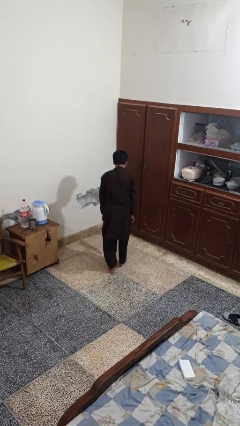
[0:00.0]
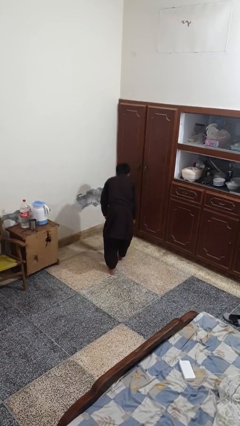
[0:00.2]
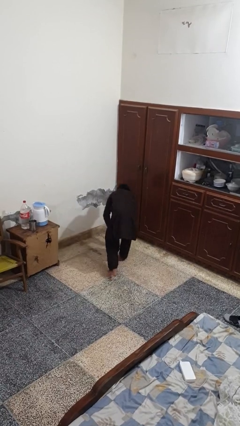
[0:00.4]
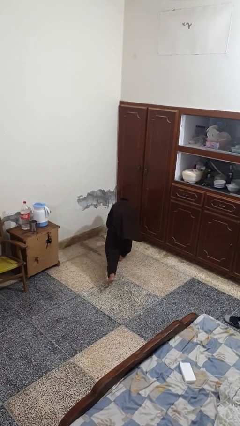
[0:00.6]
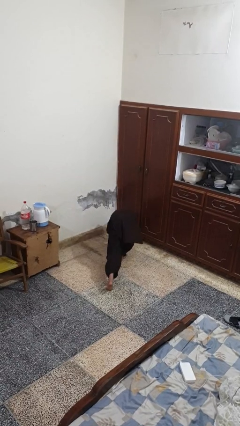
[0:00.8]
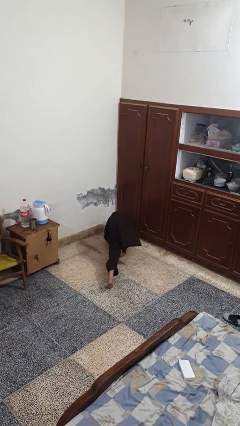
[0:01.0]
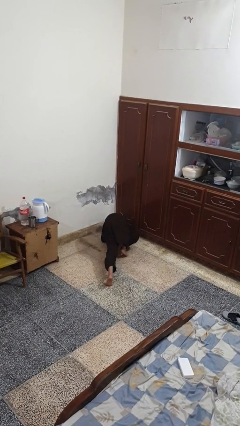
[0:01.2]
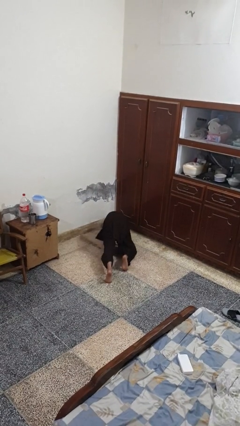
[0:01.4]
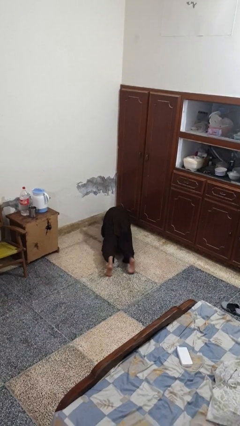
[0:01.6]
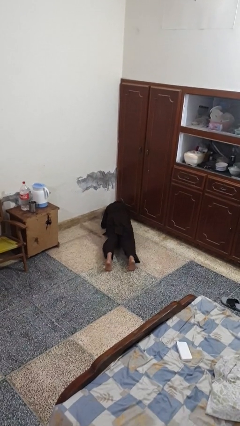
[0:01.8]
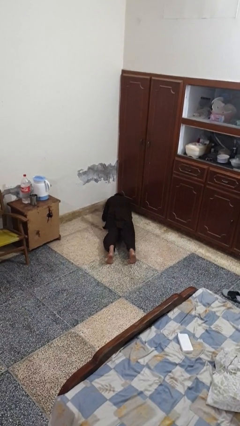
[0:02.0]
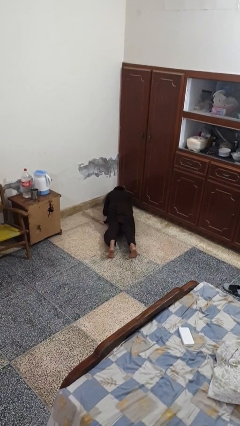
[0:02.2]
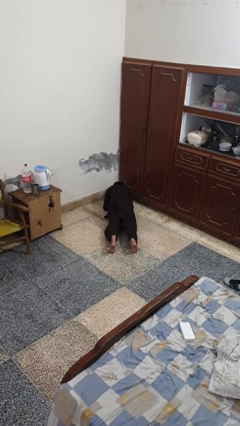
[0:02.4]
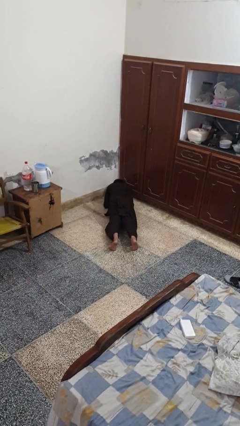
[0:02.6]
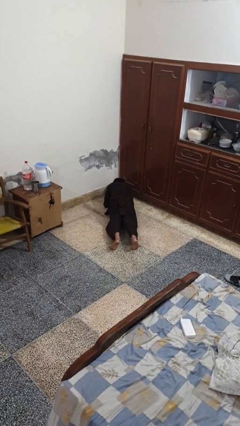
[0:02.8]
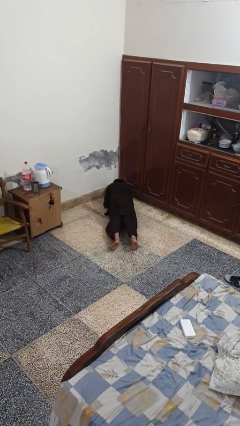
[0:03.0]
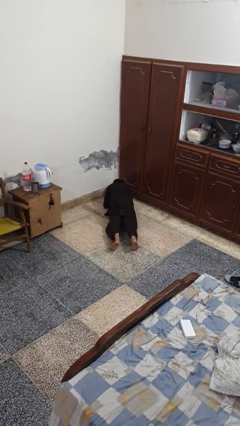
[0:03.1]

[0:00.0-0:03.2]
person exercises with plank

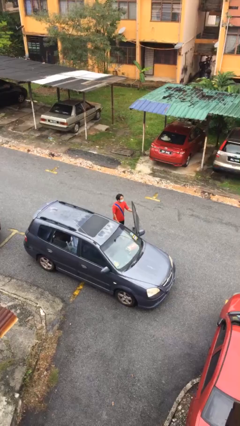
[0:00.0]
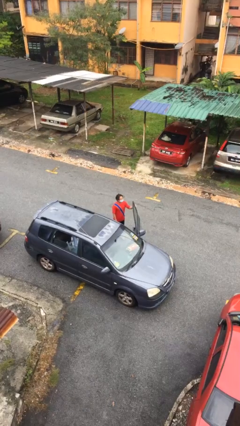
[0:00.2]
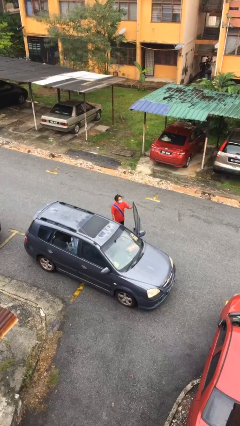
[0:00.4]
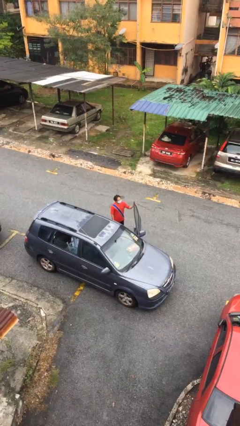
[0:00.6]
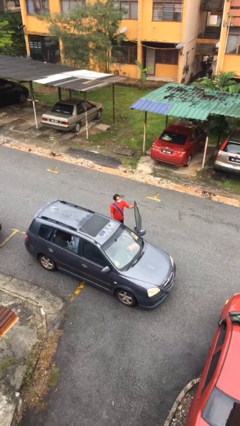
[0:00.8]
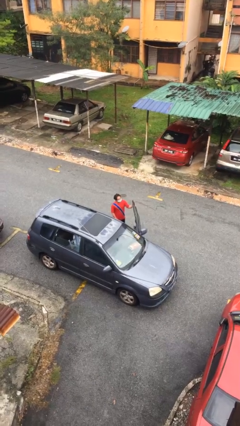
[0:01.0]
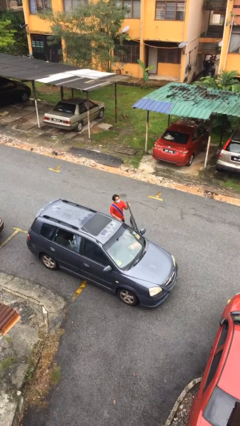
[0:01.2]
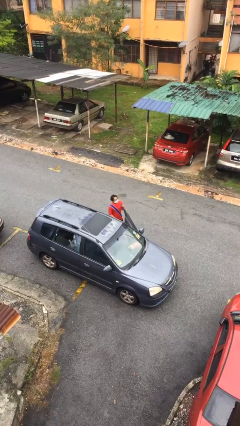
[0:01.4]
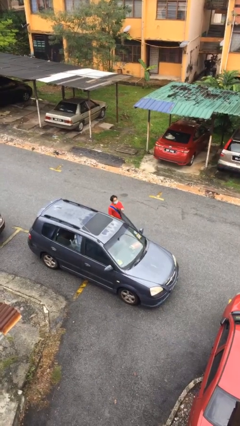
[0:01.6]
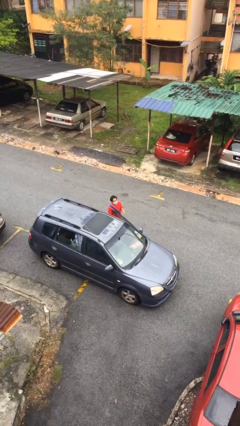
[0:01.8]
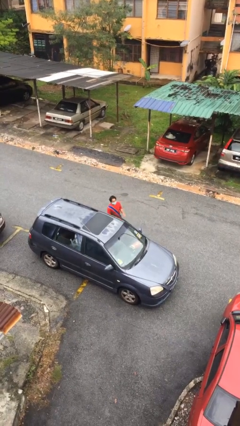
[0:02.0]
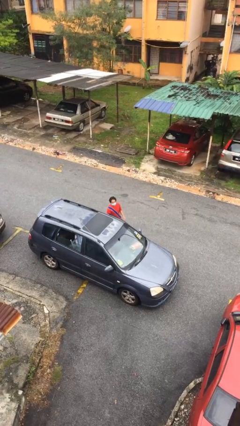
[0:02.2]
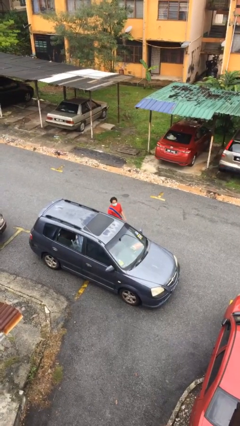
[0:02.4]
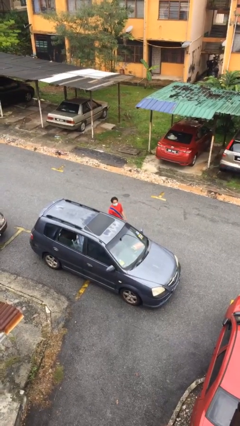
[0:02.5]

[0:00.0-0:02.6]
person closes car door

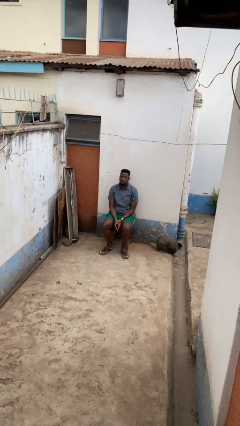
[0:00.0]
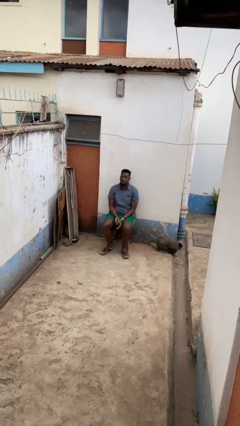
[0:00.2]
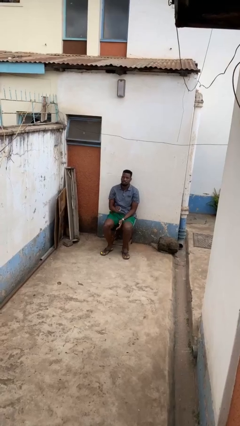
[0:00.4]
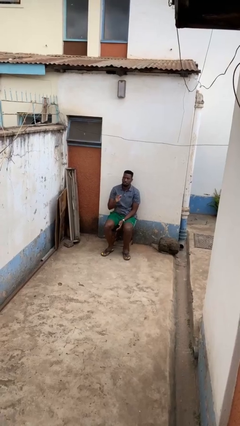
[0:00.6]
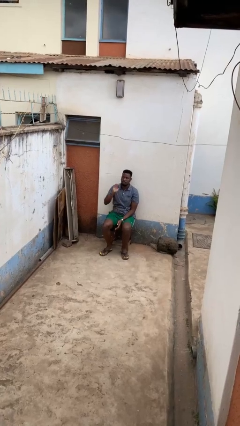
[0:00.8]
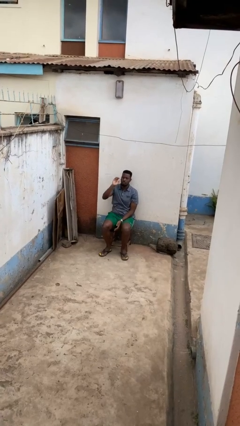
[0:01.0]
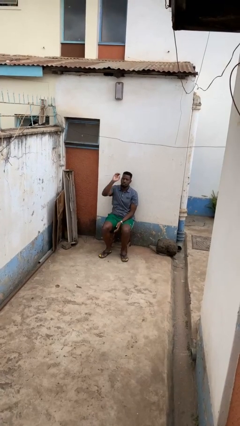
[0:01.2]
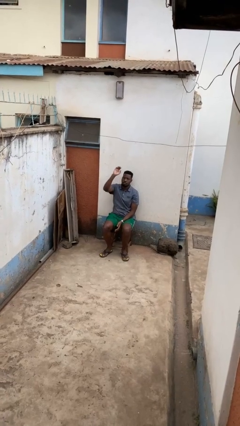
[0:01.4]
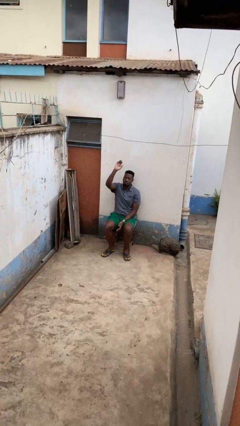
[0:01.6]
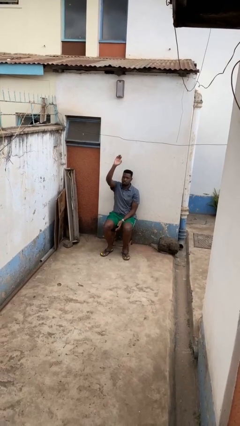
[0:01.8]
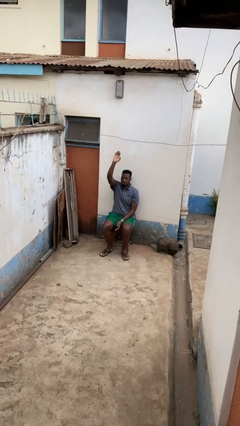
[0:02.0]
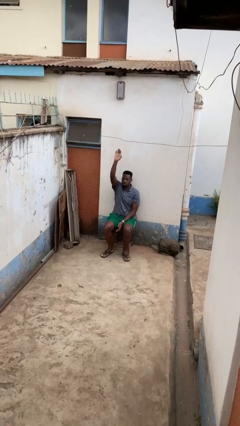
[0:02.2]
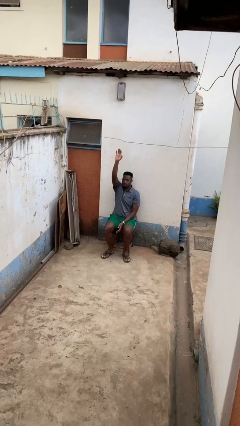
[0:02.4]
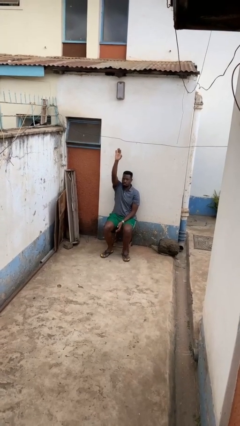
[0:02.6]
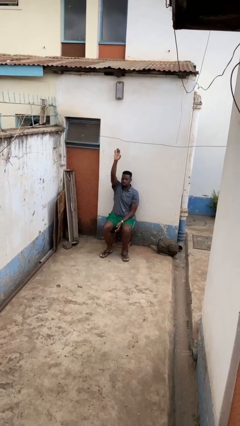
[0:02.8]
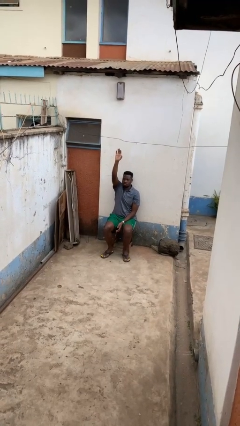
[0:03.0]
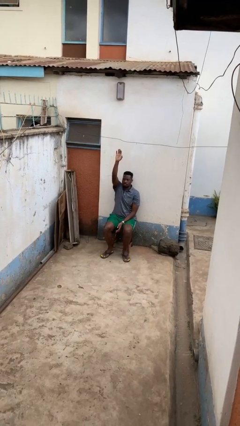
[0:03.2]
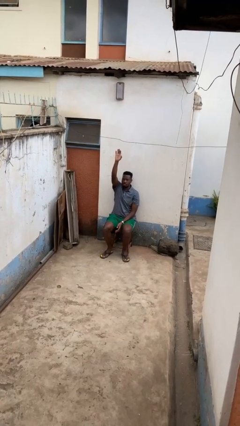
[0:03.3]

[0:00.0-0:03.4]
person gestures raise hand

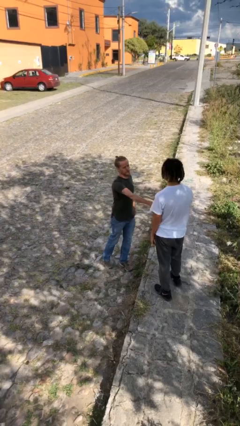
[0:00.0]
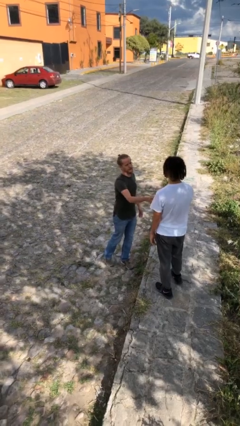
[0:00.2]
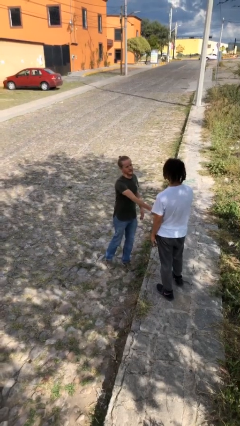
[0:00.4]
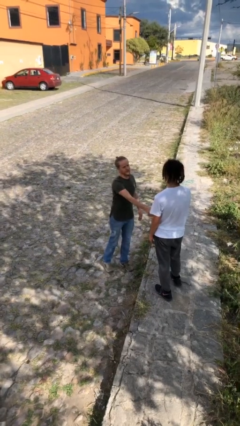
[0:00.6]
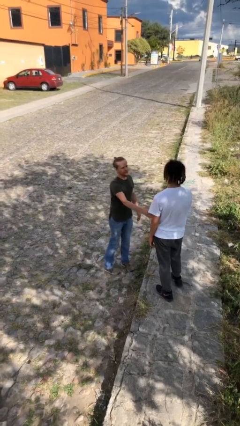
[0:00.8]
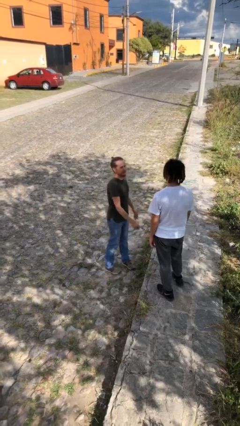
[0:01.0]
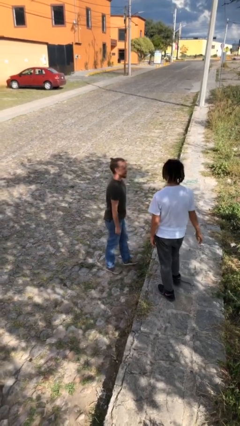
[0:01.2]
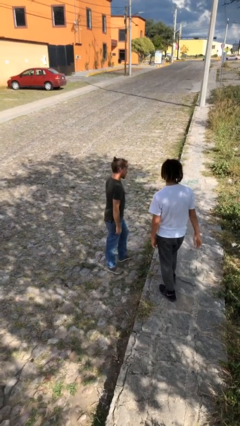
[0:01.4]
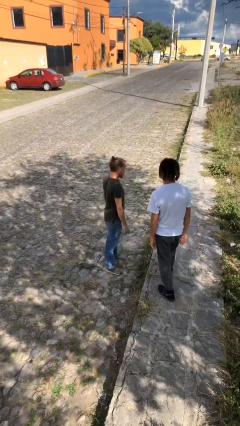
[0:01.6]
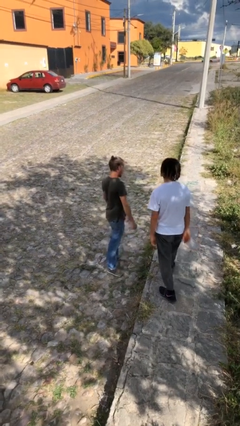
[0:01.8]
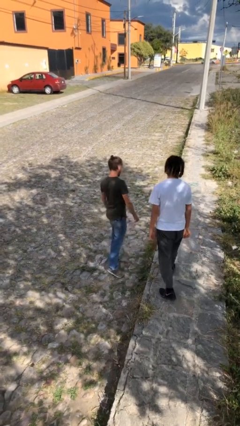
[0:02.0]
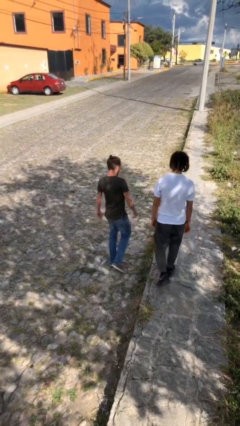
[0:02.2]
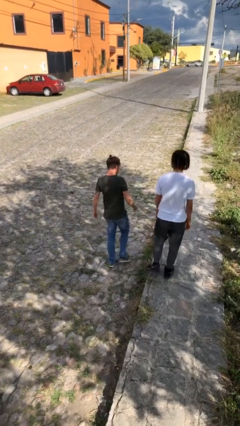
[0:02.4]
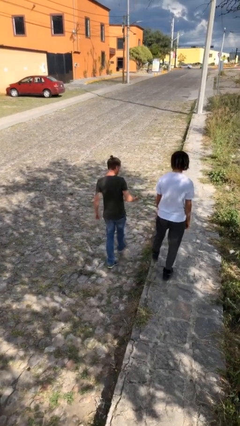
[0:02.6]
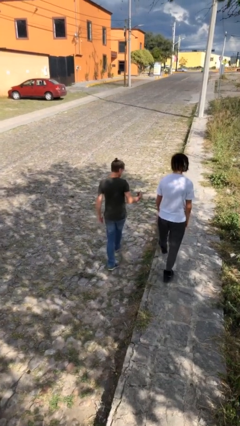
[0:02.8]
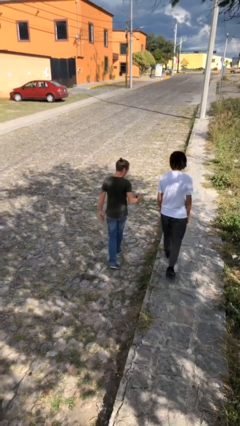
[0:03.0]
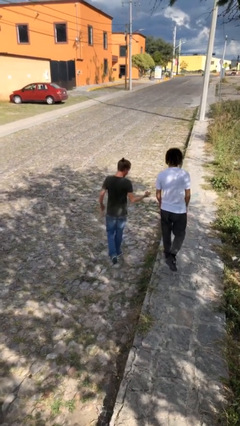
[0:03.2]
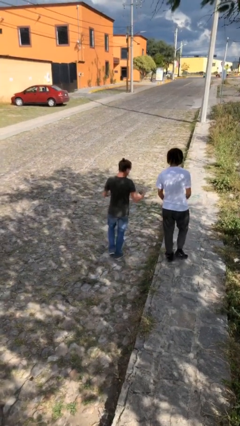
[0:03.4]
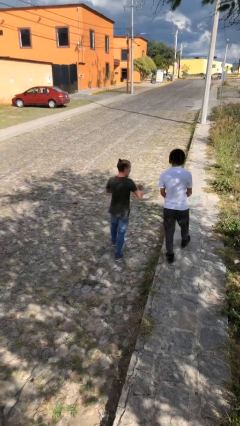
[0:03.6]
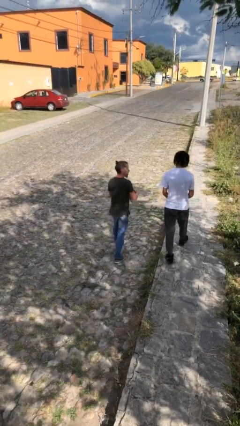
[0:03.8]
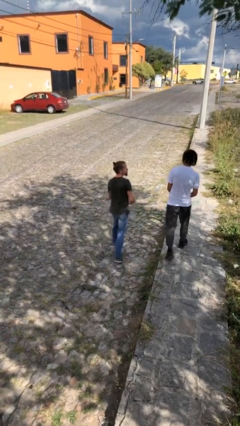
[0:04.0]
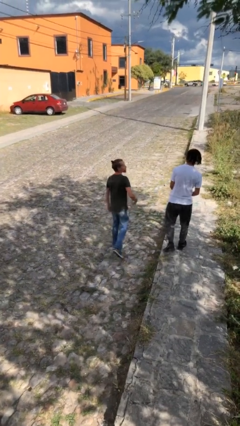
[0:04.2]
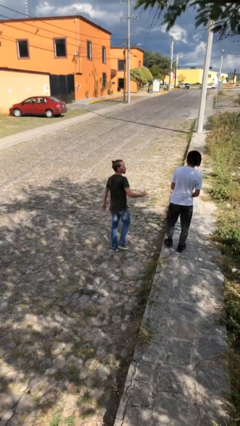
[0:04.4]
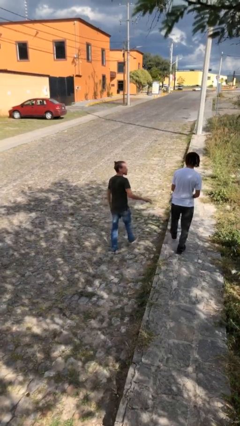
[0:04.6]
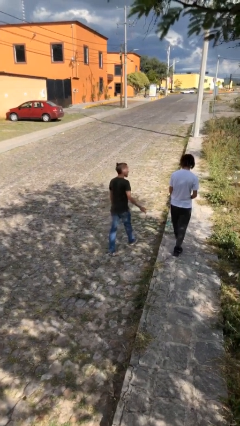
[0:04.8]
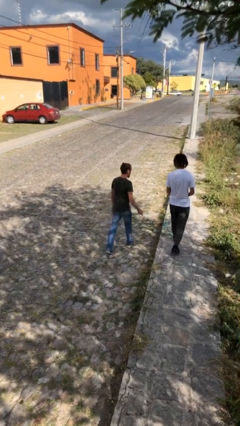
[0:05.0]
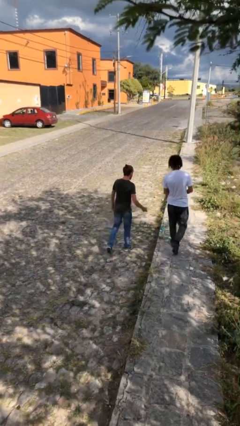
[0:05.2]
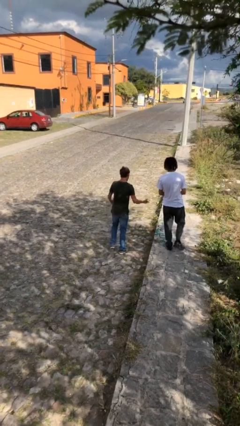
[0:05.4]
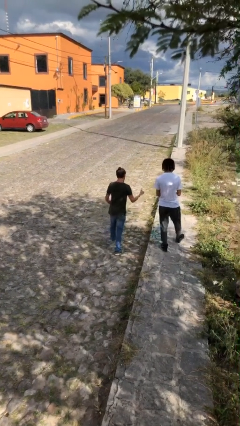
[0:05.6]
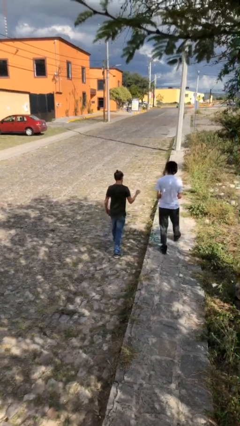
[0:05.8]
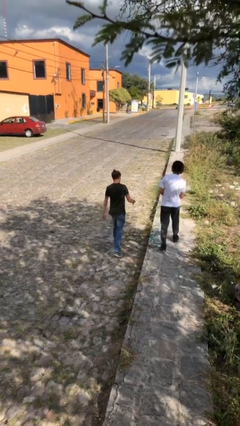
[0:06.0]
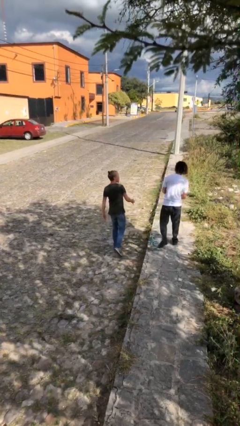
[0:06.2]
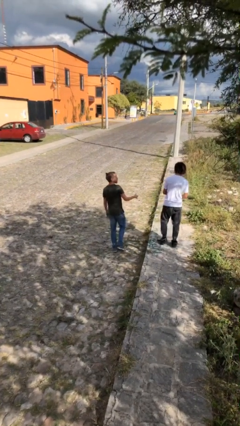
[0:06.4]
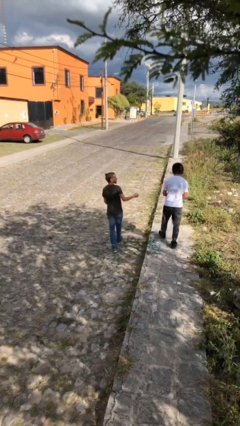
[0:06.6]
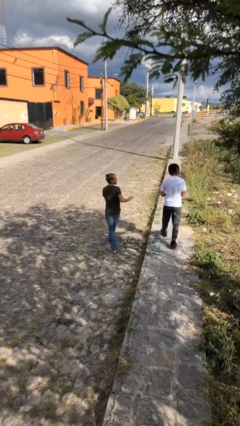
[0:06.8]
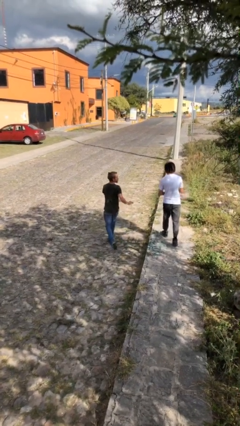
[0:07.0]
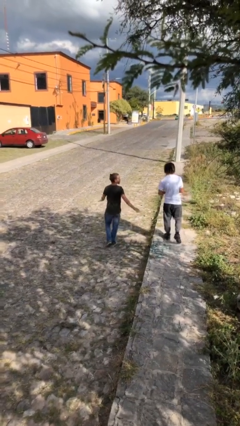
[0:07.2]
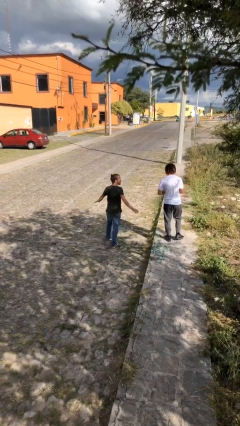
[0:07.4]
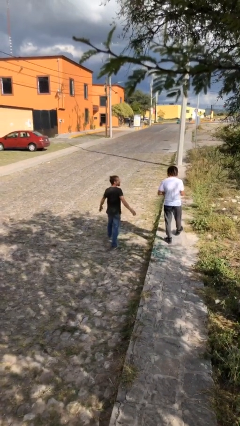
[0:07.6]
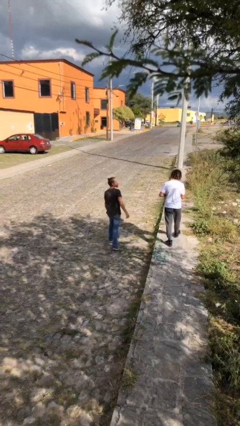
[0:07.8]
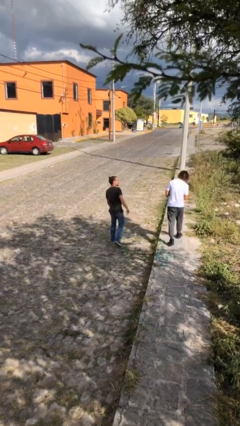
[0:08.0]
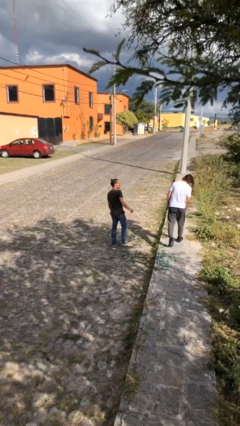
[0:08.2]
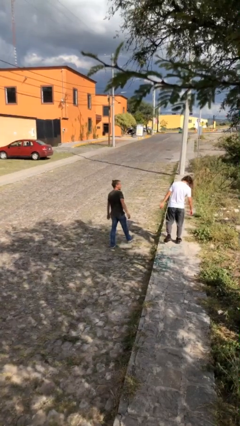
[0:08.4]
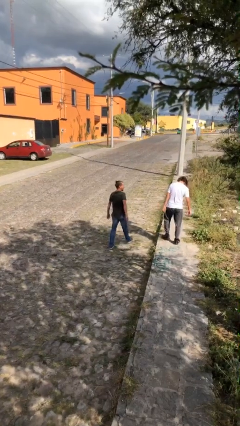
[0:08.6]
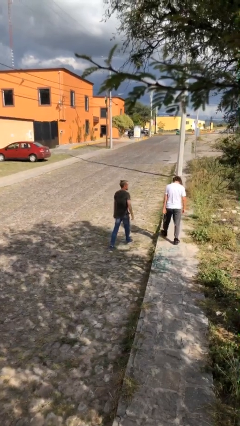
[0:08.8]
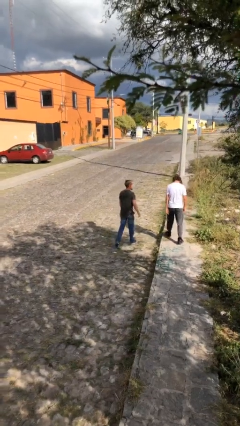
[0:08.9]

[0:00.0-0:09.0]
person talks to person
